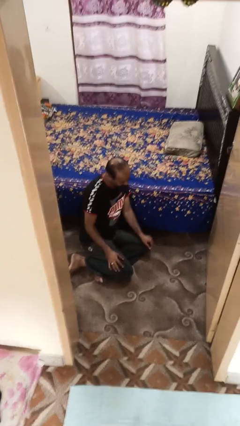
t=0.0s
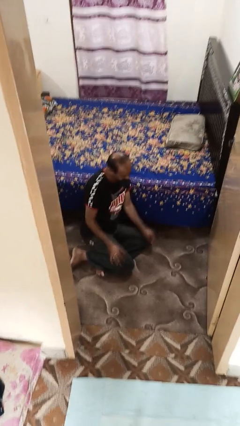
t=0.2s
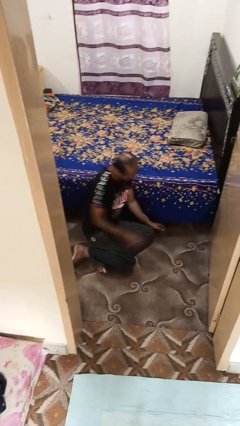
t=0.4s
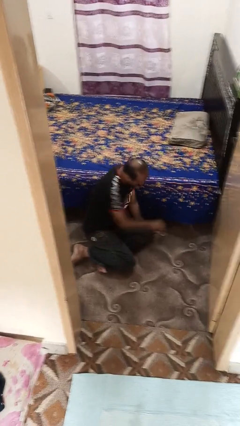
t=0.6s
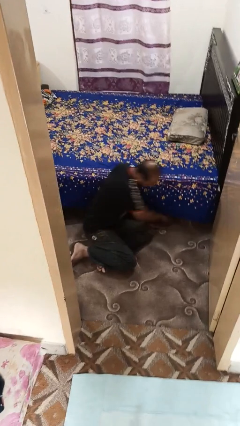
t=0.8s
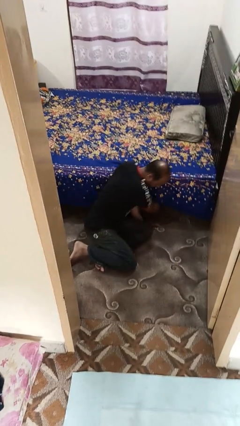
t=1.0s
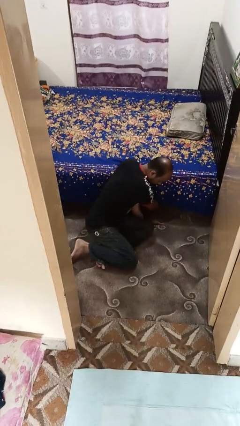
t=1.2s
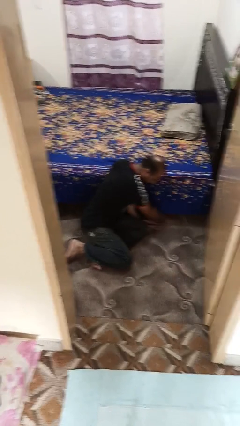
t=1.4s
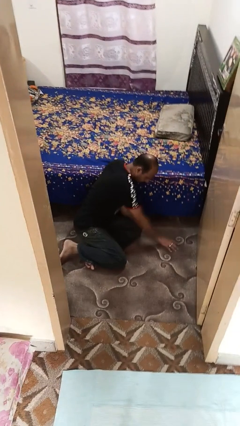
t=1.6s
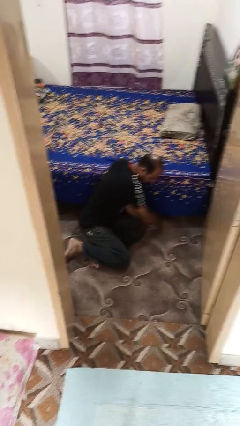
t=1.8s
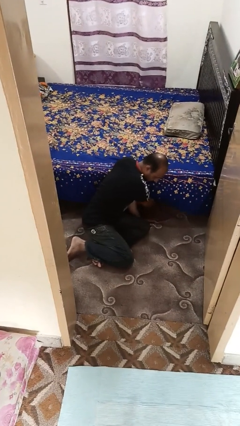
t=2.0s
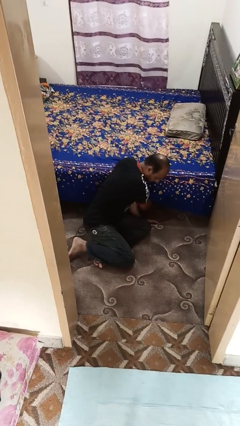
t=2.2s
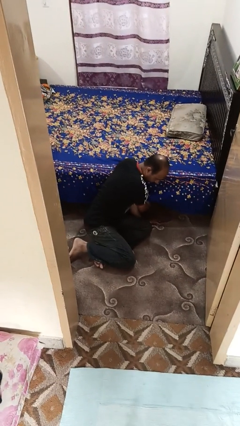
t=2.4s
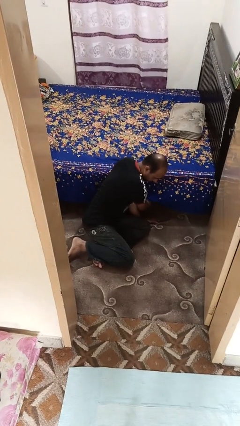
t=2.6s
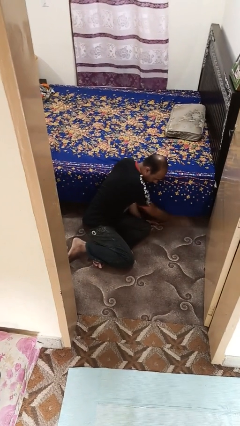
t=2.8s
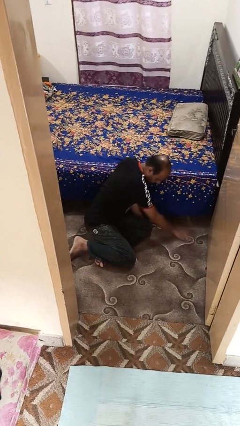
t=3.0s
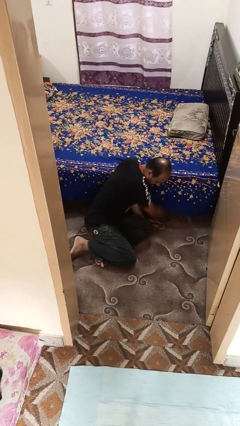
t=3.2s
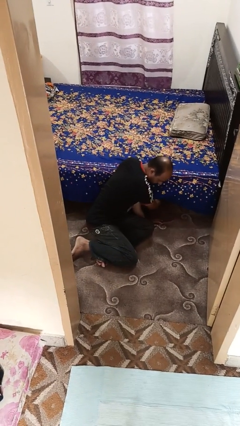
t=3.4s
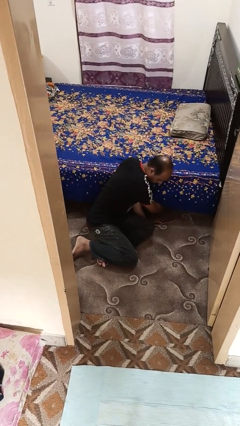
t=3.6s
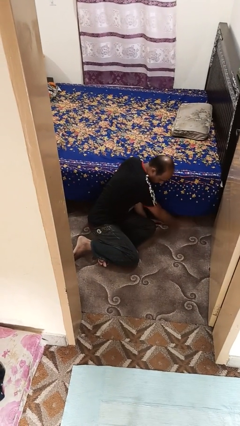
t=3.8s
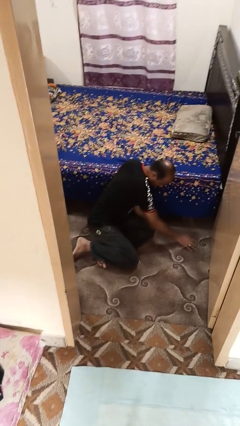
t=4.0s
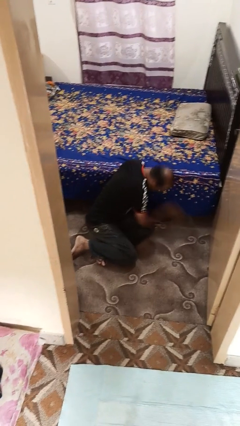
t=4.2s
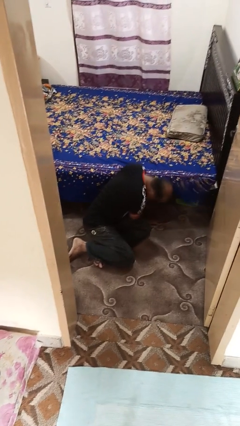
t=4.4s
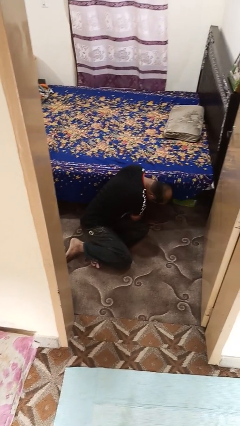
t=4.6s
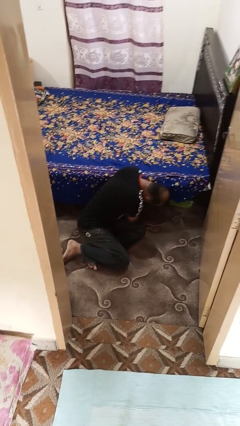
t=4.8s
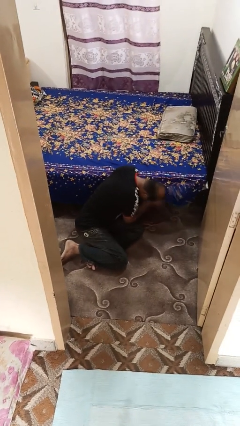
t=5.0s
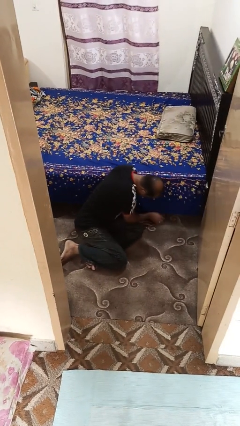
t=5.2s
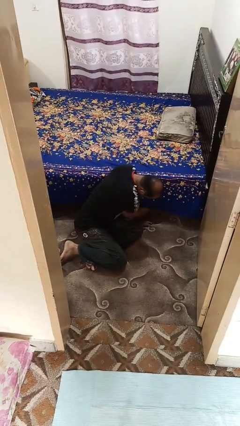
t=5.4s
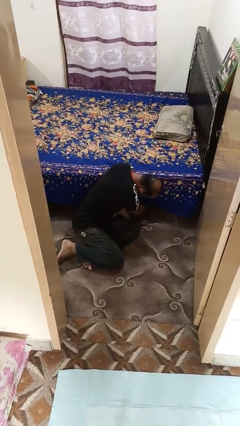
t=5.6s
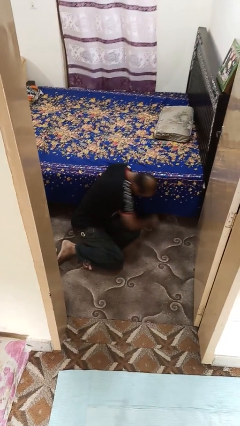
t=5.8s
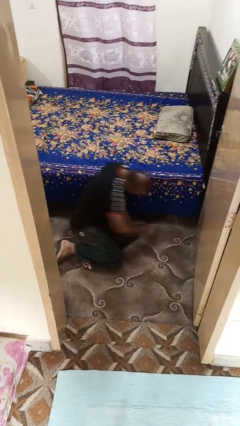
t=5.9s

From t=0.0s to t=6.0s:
person searches under bed

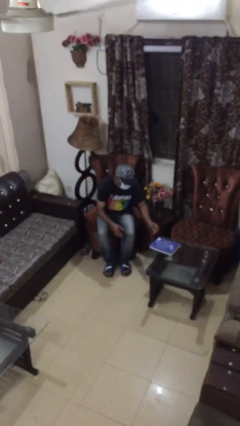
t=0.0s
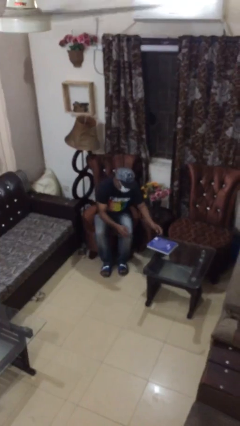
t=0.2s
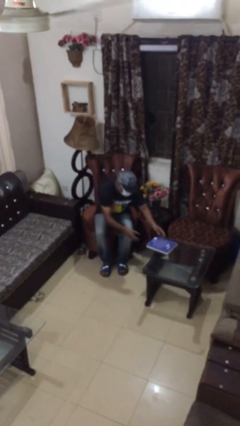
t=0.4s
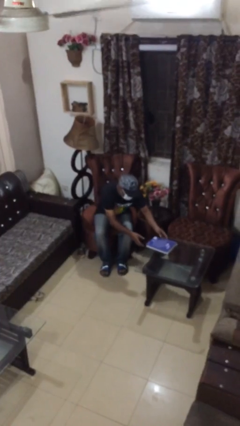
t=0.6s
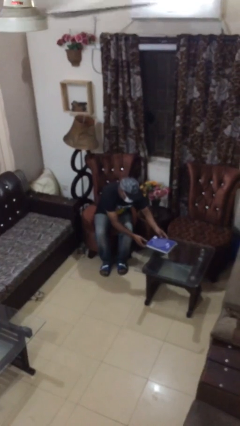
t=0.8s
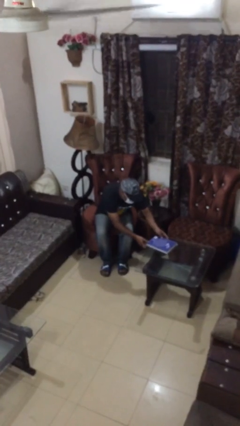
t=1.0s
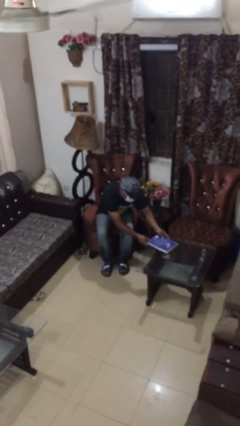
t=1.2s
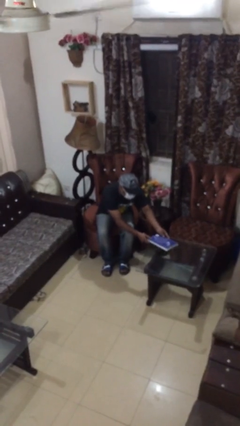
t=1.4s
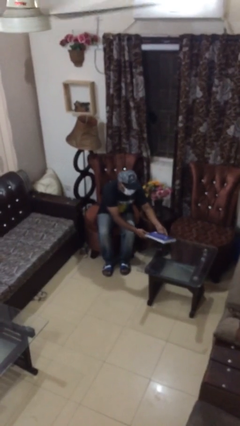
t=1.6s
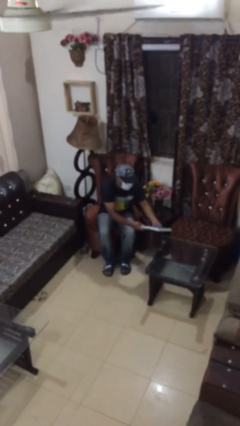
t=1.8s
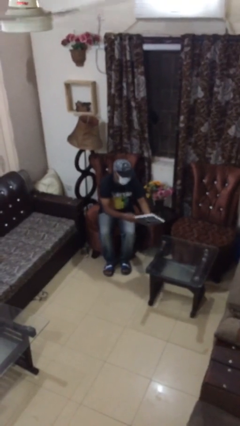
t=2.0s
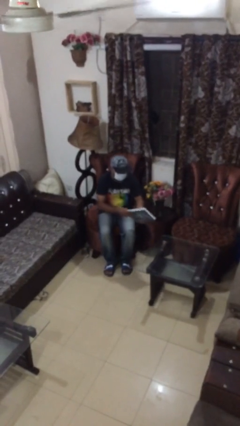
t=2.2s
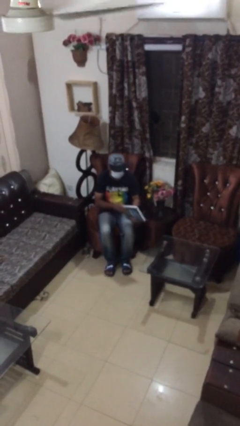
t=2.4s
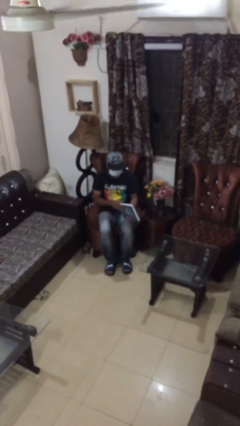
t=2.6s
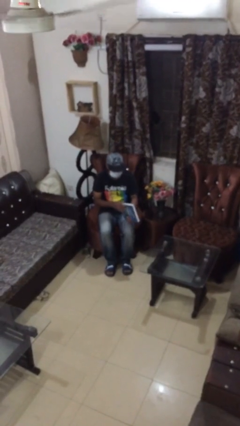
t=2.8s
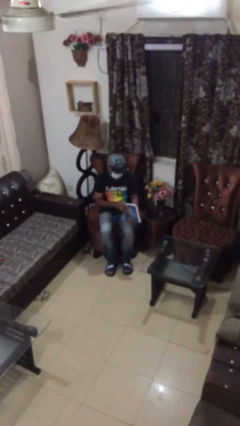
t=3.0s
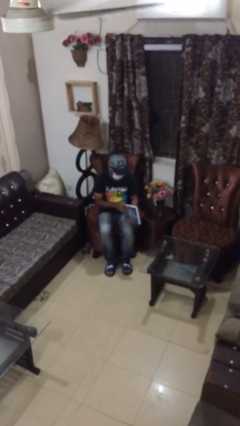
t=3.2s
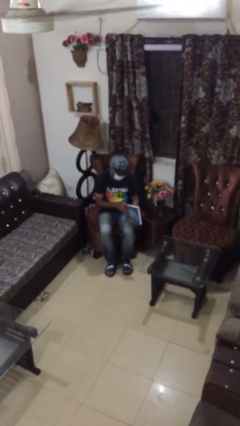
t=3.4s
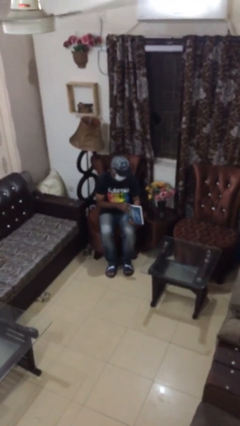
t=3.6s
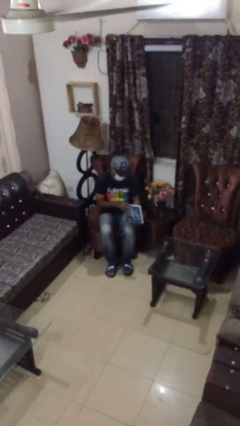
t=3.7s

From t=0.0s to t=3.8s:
person picks up object from table

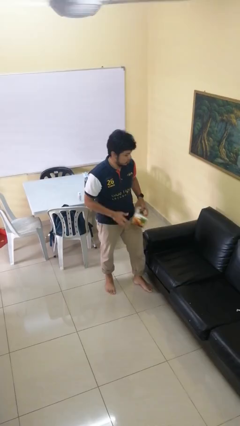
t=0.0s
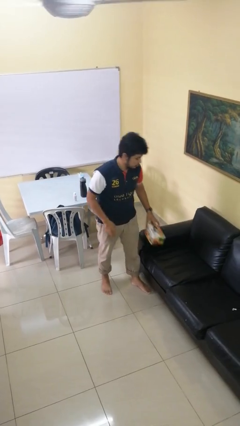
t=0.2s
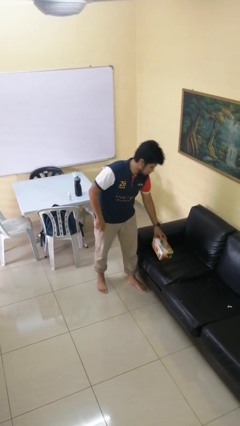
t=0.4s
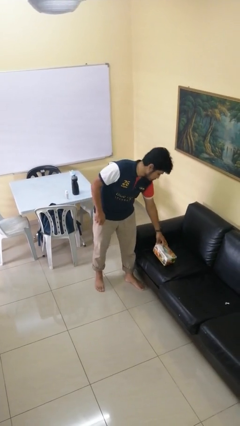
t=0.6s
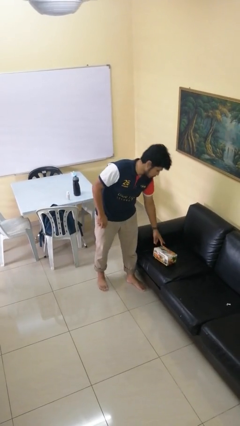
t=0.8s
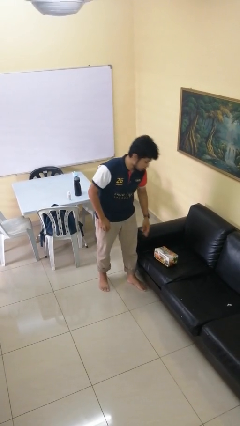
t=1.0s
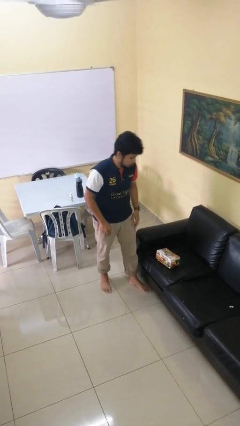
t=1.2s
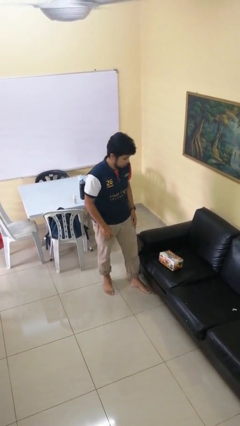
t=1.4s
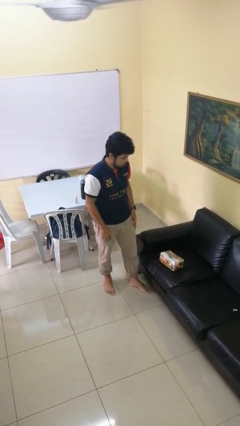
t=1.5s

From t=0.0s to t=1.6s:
person puts down object on couch

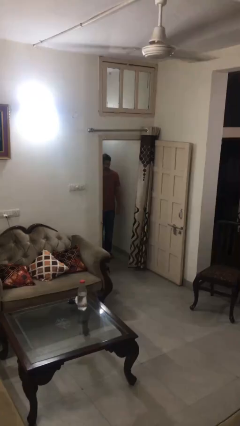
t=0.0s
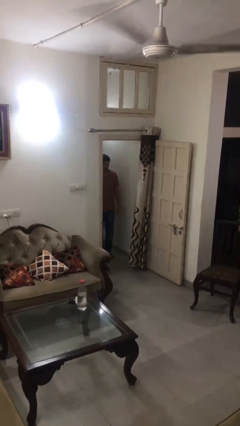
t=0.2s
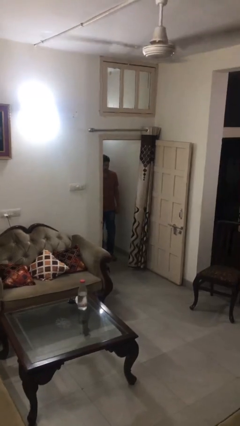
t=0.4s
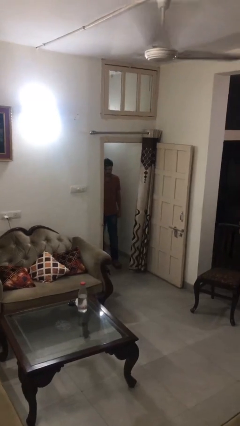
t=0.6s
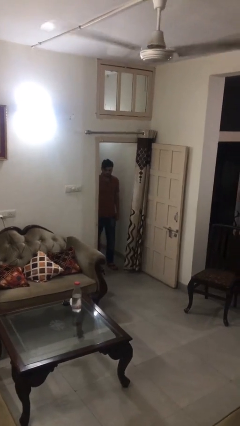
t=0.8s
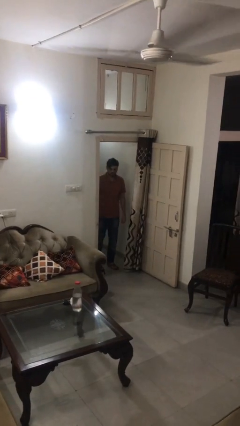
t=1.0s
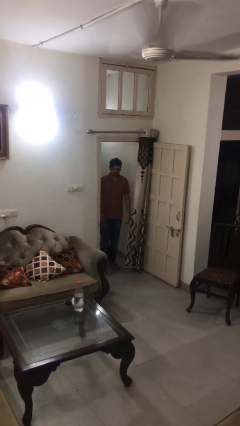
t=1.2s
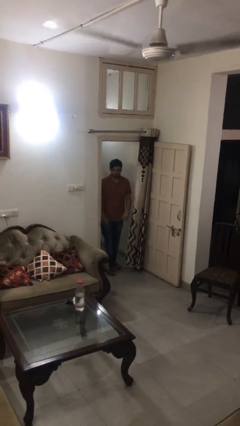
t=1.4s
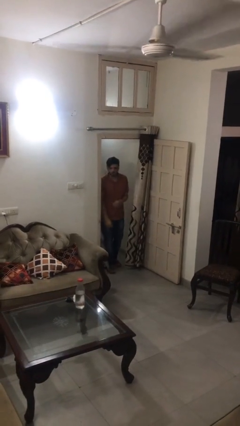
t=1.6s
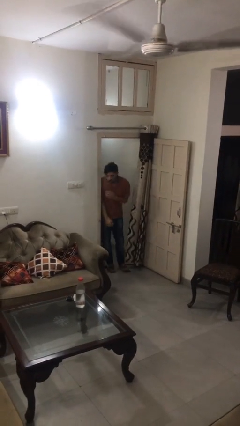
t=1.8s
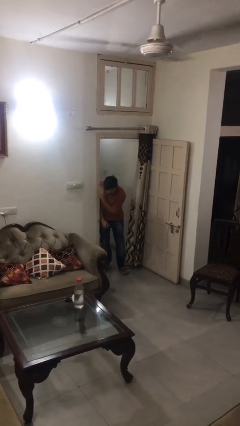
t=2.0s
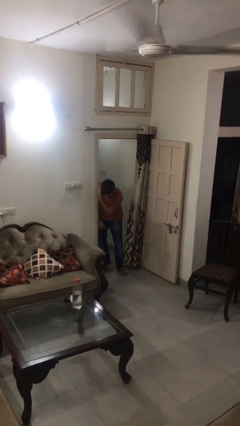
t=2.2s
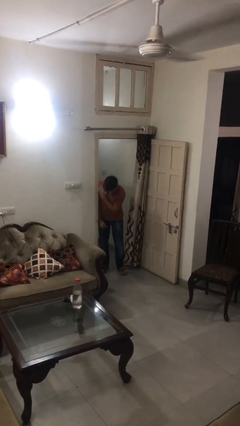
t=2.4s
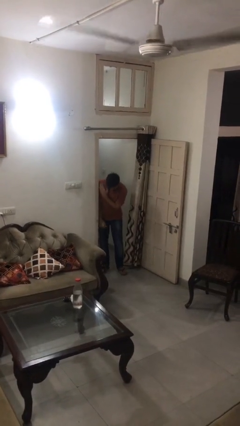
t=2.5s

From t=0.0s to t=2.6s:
person bumps into wall

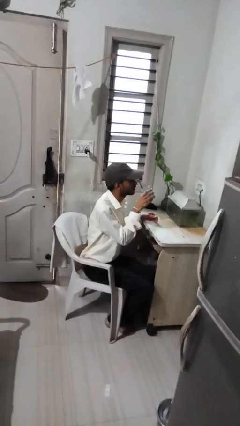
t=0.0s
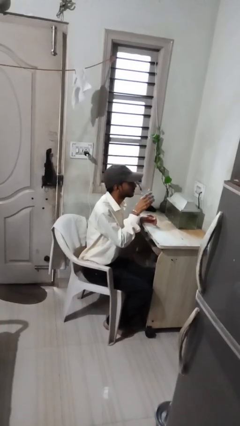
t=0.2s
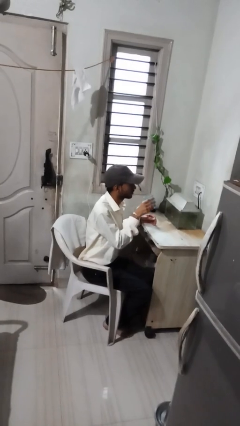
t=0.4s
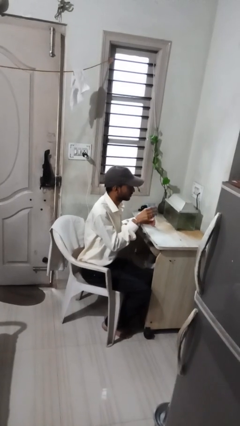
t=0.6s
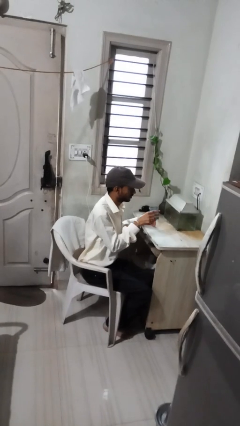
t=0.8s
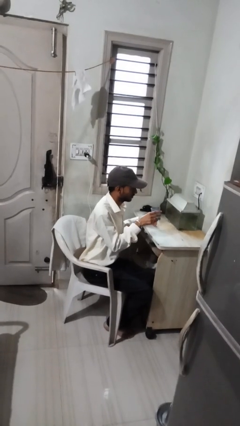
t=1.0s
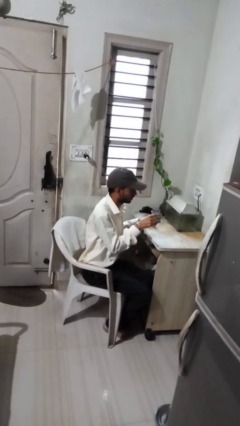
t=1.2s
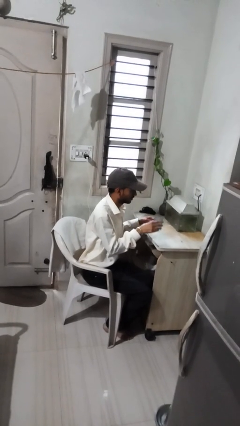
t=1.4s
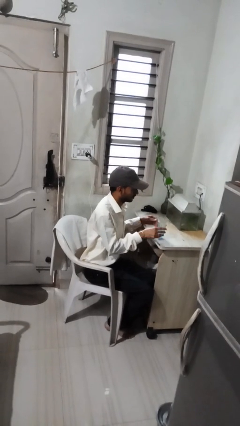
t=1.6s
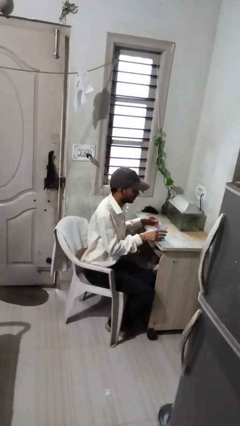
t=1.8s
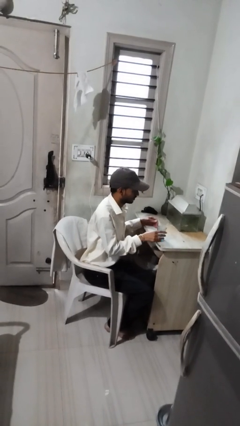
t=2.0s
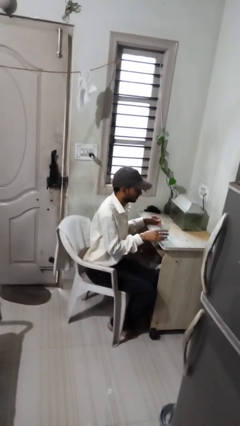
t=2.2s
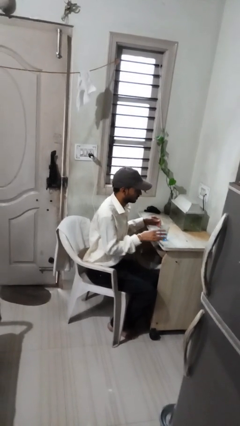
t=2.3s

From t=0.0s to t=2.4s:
person puts down object on table

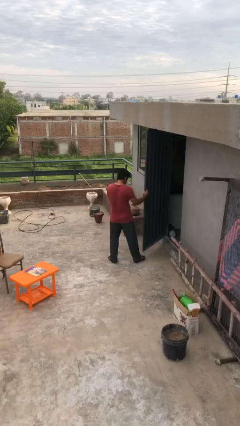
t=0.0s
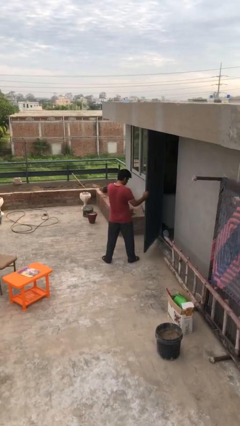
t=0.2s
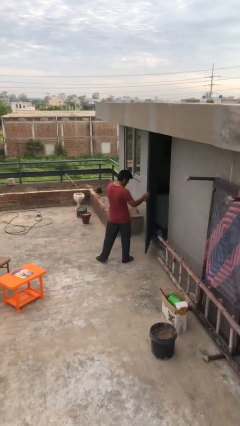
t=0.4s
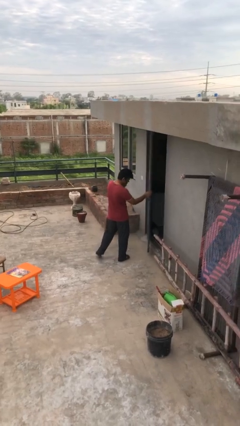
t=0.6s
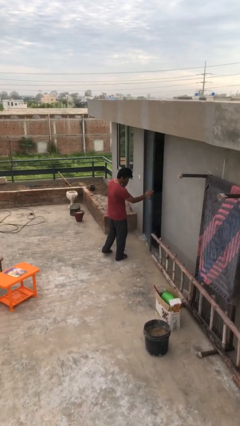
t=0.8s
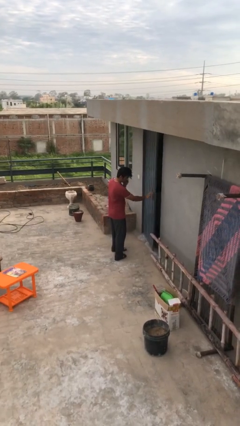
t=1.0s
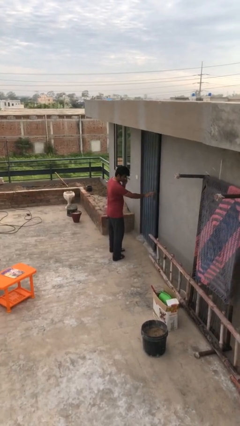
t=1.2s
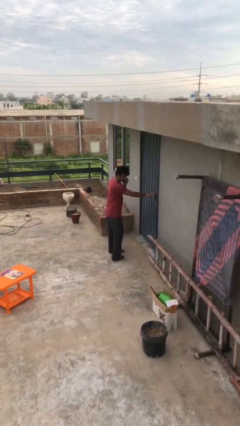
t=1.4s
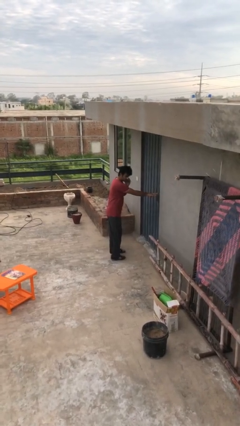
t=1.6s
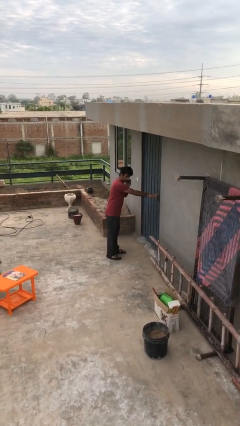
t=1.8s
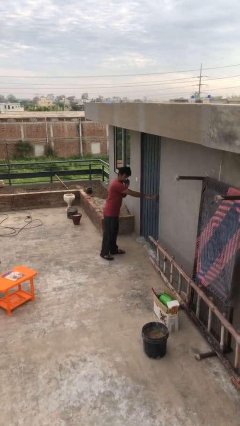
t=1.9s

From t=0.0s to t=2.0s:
person closes facility door
